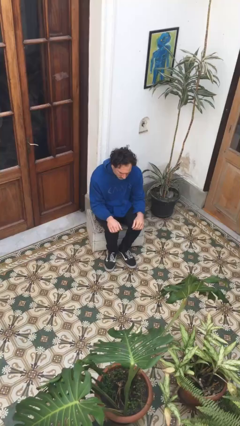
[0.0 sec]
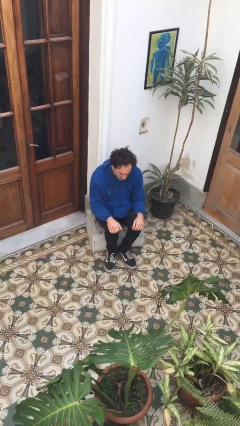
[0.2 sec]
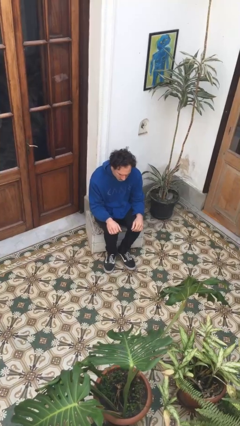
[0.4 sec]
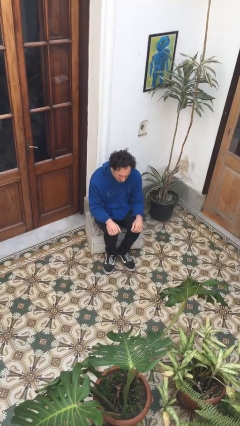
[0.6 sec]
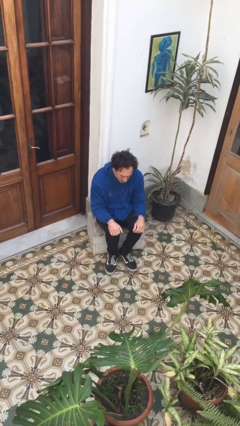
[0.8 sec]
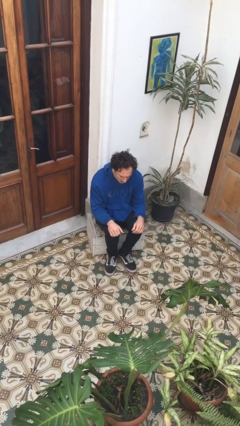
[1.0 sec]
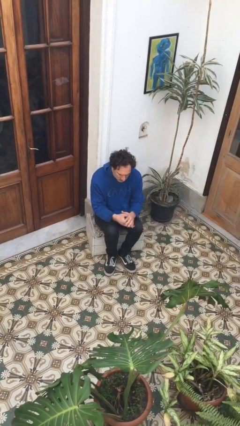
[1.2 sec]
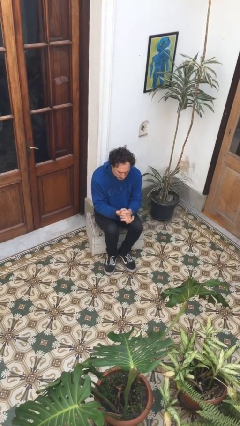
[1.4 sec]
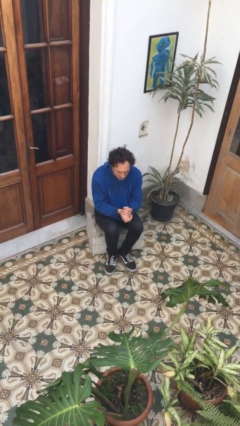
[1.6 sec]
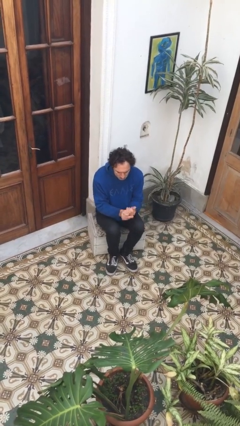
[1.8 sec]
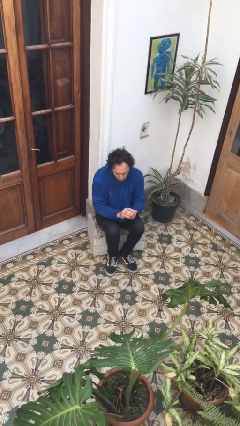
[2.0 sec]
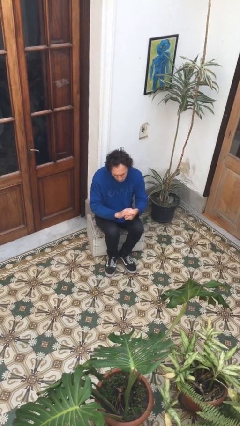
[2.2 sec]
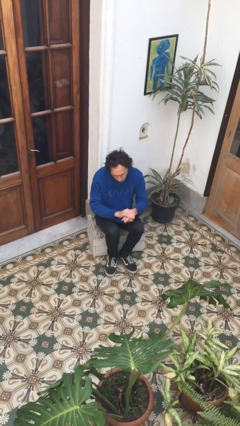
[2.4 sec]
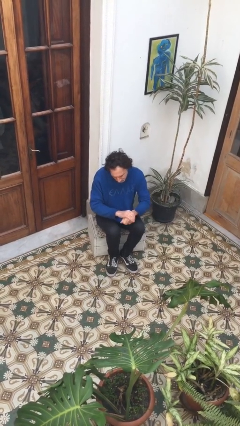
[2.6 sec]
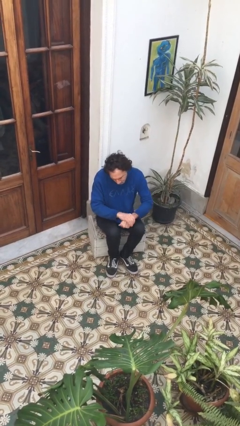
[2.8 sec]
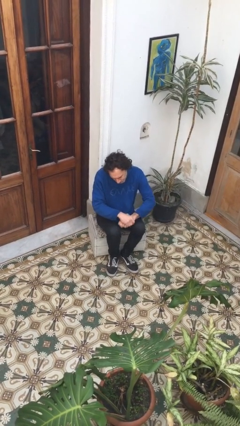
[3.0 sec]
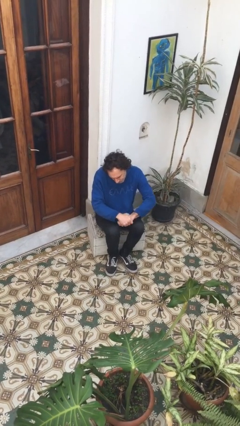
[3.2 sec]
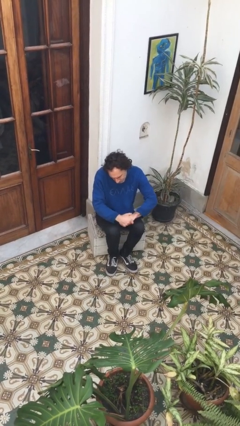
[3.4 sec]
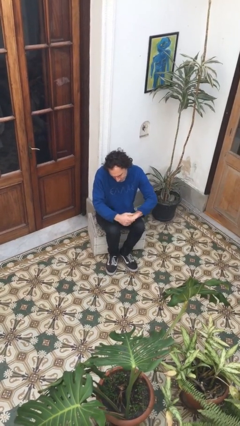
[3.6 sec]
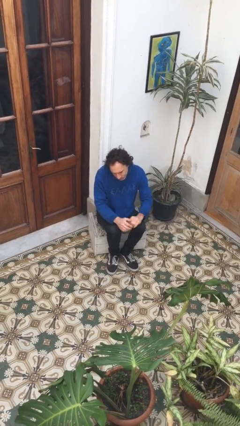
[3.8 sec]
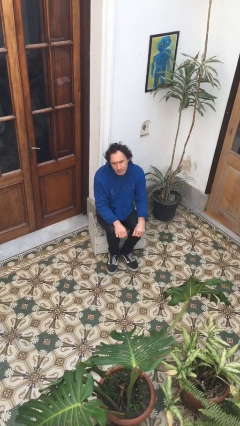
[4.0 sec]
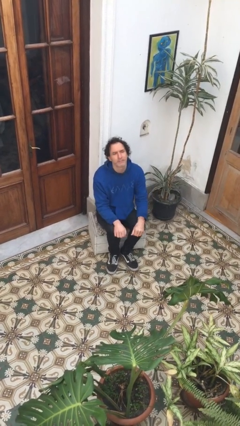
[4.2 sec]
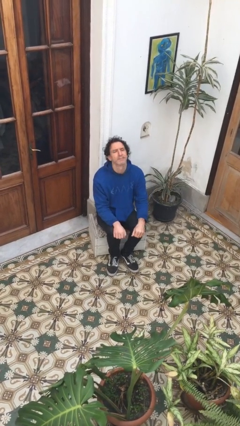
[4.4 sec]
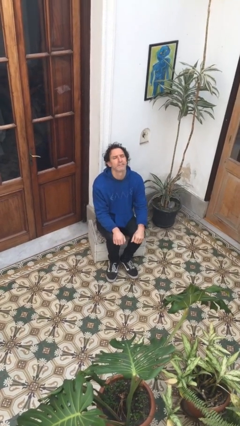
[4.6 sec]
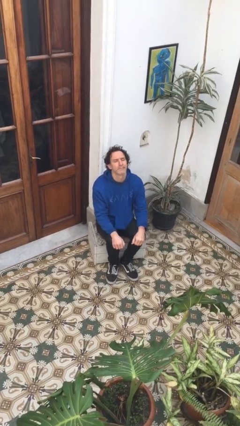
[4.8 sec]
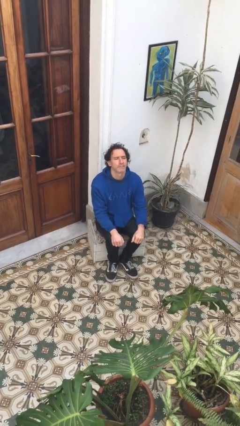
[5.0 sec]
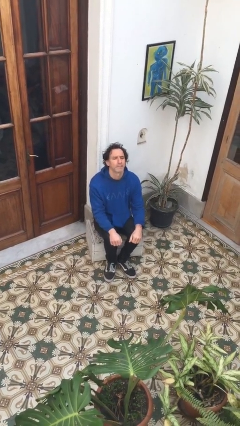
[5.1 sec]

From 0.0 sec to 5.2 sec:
person looks at hands in lap

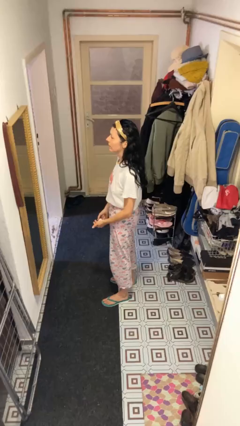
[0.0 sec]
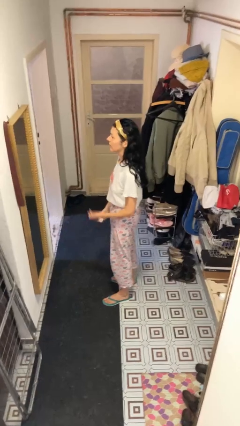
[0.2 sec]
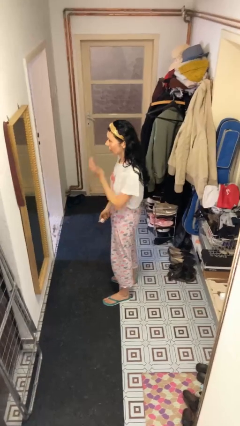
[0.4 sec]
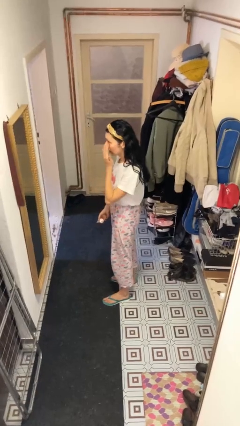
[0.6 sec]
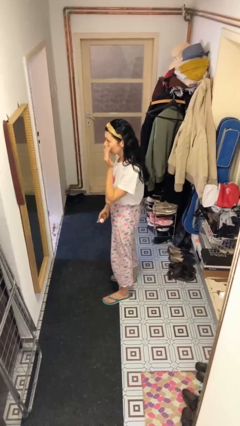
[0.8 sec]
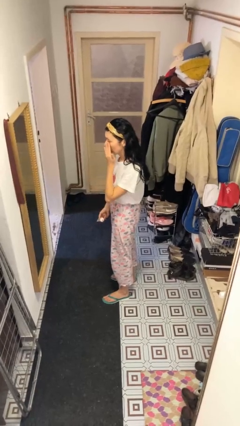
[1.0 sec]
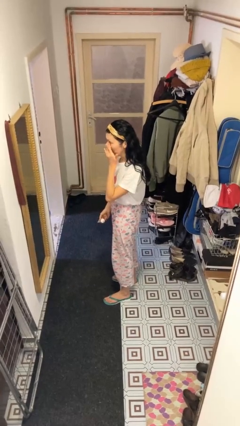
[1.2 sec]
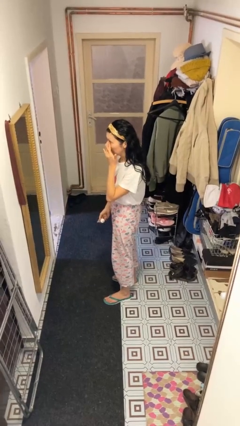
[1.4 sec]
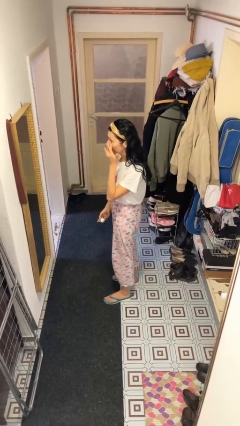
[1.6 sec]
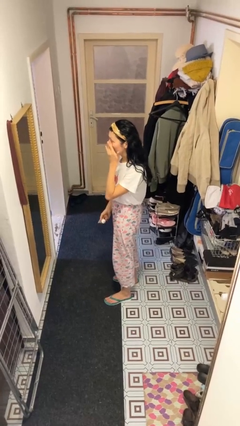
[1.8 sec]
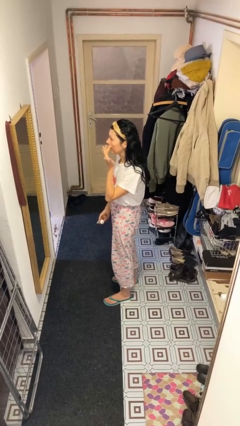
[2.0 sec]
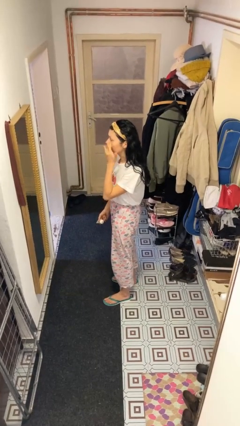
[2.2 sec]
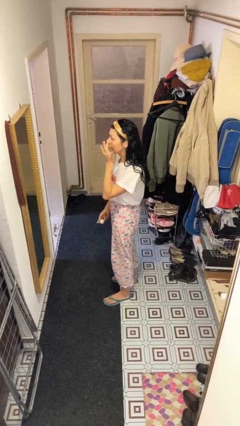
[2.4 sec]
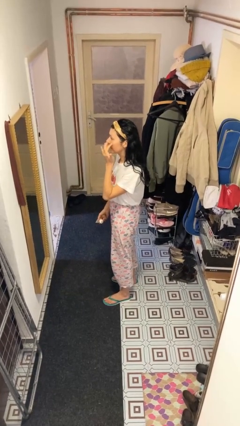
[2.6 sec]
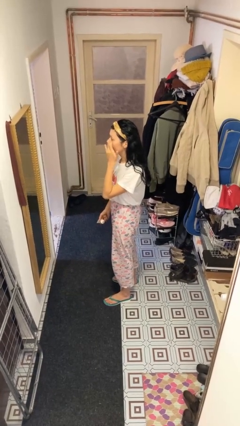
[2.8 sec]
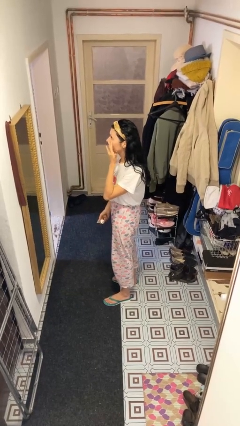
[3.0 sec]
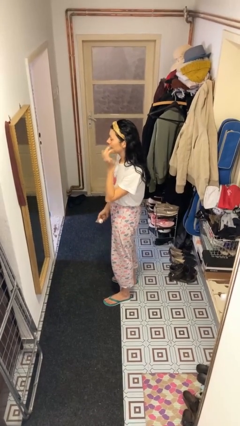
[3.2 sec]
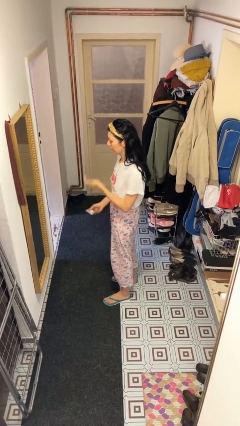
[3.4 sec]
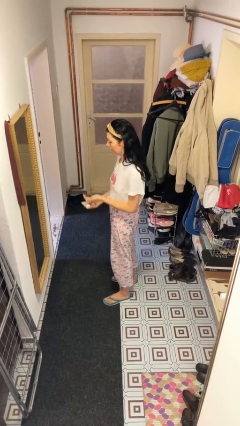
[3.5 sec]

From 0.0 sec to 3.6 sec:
person applies foundation makeup

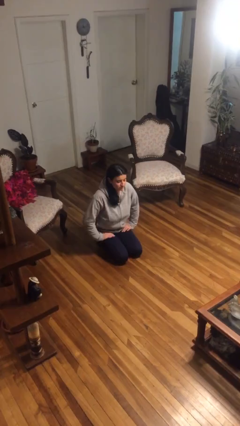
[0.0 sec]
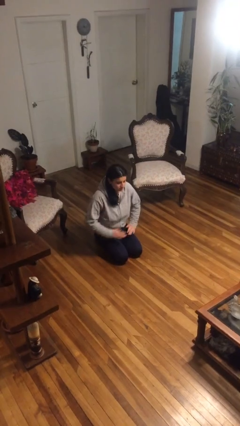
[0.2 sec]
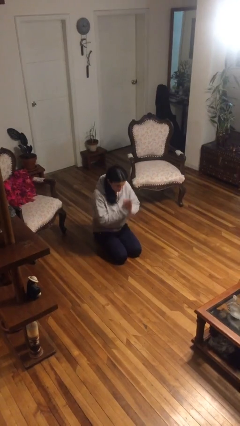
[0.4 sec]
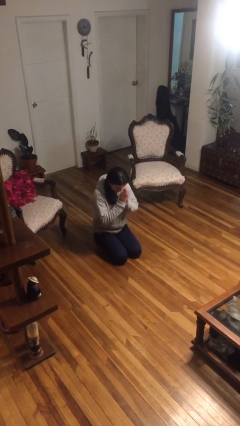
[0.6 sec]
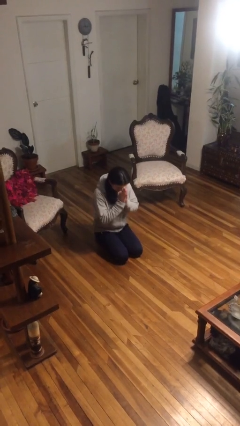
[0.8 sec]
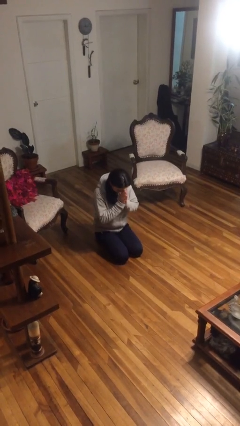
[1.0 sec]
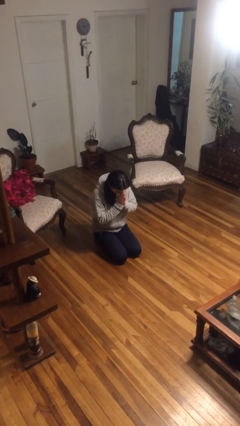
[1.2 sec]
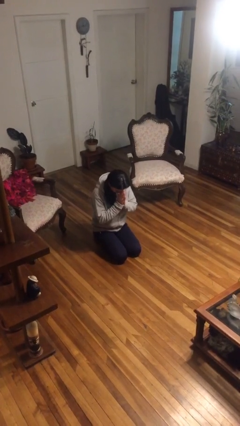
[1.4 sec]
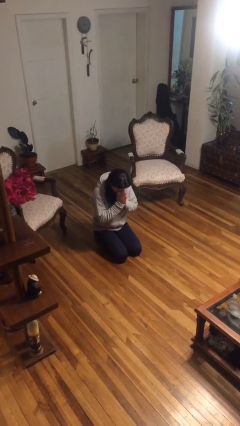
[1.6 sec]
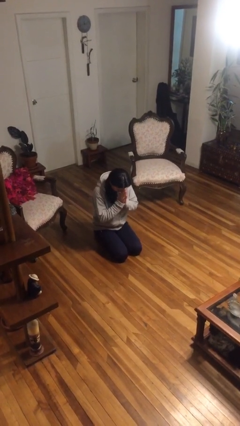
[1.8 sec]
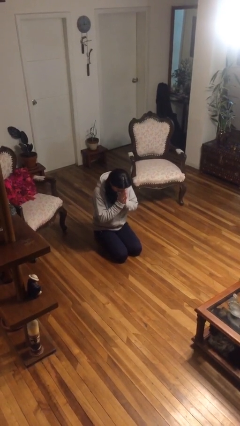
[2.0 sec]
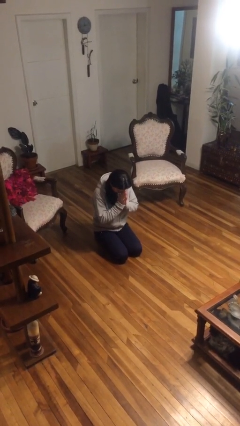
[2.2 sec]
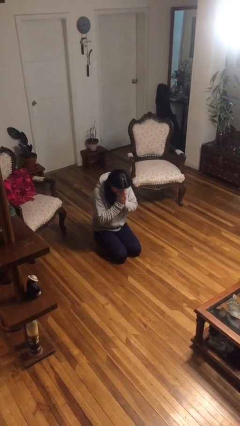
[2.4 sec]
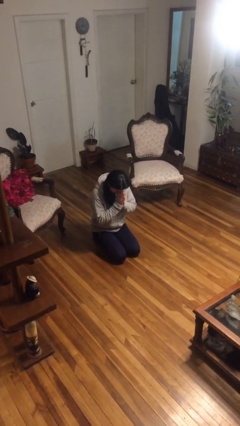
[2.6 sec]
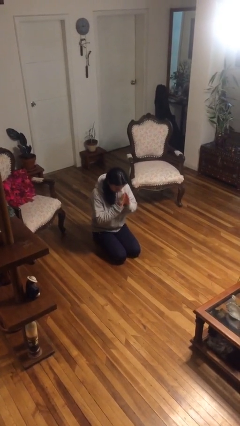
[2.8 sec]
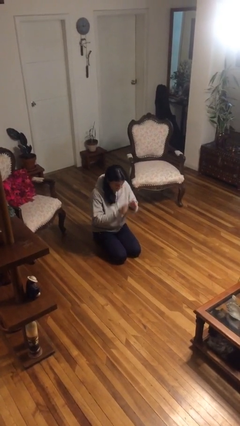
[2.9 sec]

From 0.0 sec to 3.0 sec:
person prays

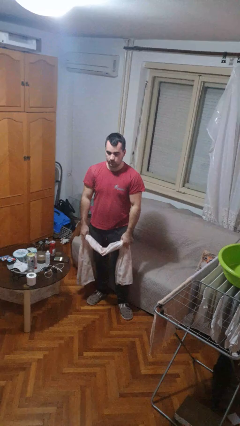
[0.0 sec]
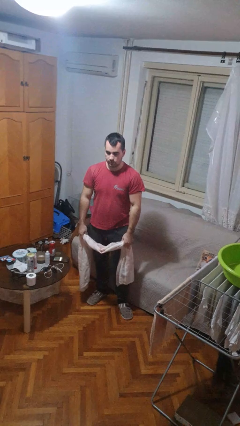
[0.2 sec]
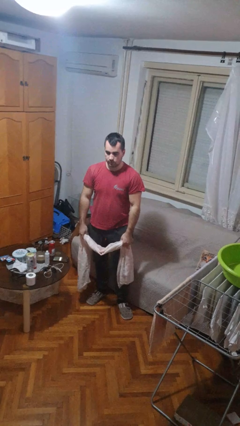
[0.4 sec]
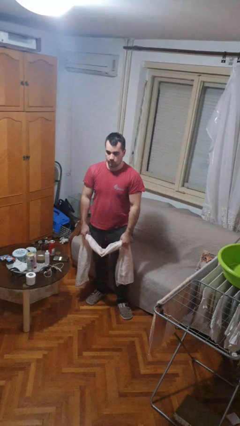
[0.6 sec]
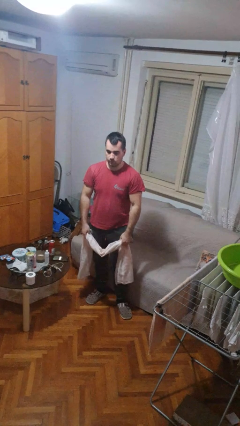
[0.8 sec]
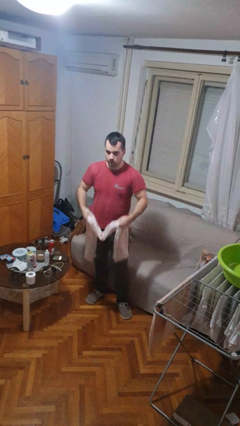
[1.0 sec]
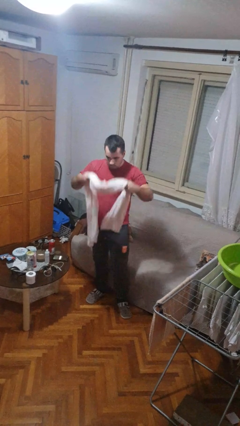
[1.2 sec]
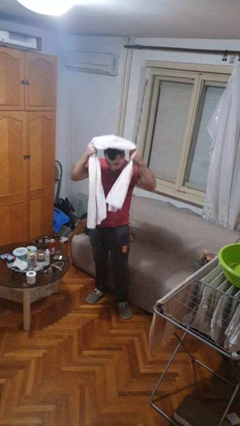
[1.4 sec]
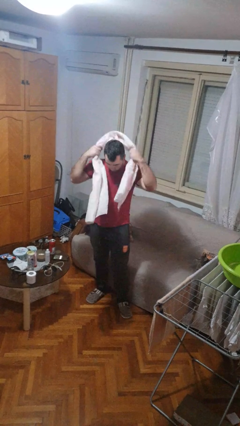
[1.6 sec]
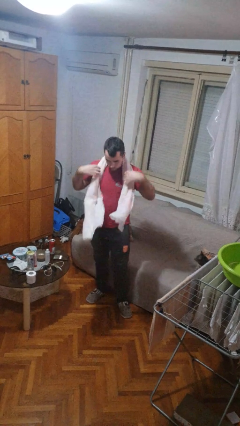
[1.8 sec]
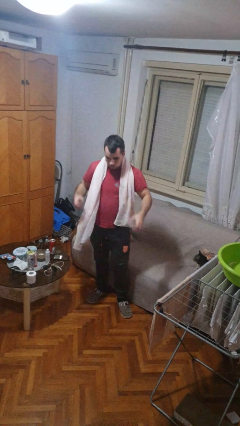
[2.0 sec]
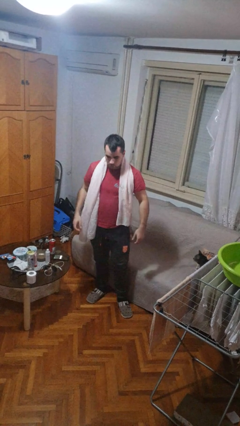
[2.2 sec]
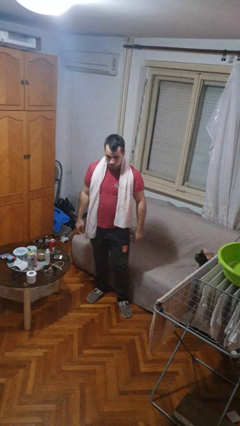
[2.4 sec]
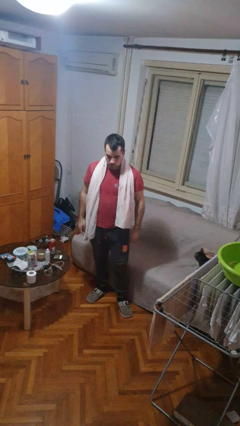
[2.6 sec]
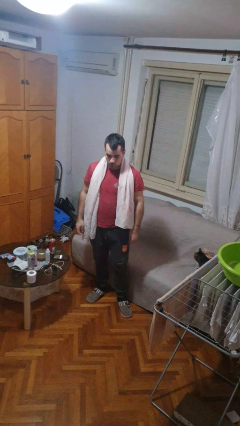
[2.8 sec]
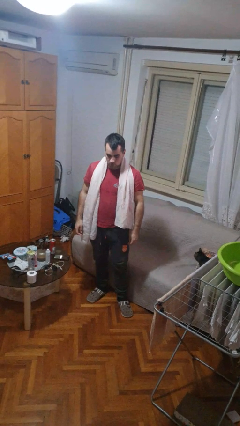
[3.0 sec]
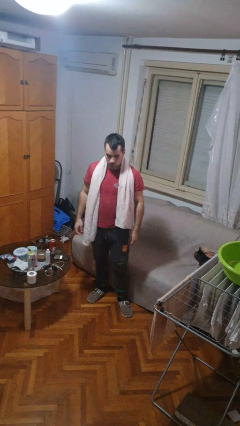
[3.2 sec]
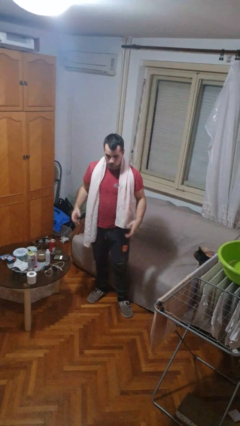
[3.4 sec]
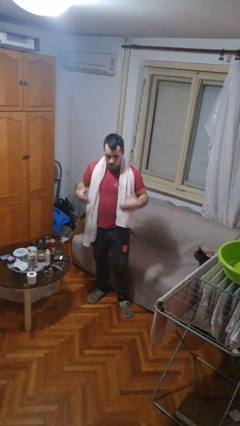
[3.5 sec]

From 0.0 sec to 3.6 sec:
person puts on scarf

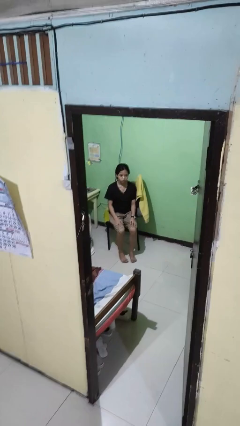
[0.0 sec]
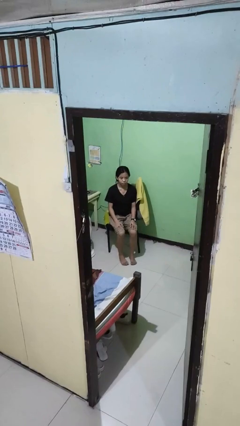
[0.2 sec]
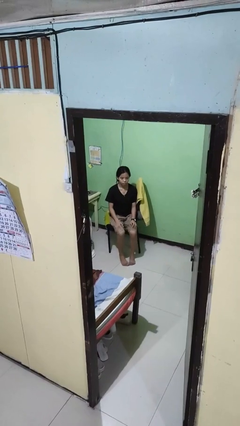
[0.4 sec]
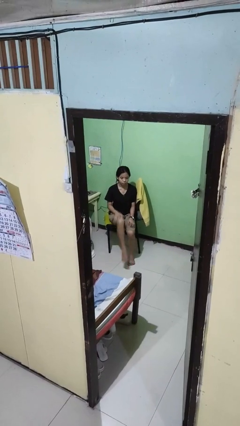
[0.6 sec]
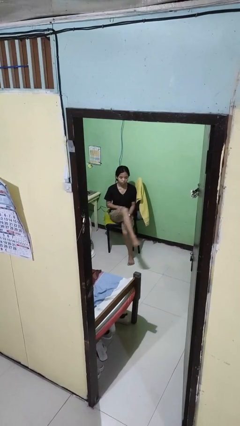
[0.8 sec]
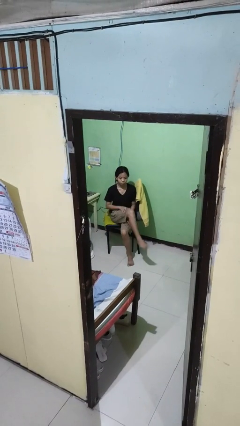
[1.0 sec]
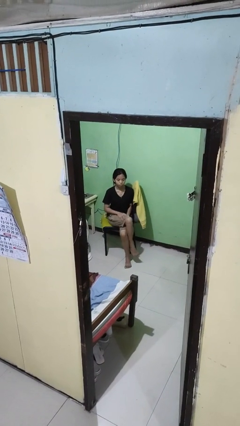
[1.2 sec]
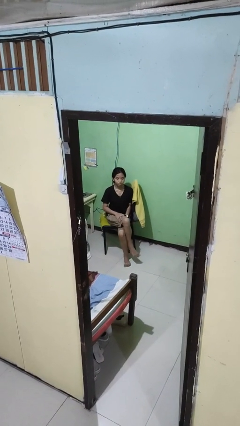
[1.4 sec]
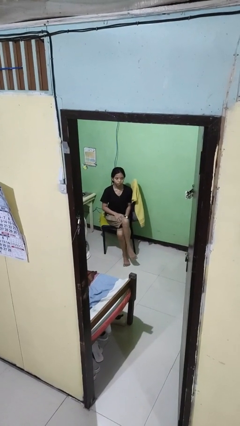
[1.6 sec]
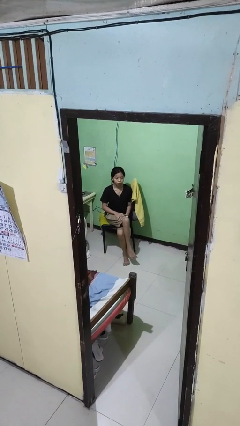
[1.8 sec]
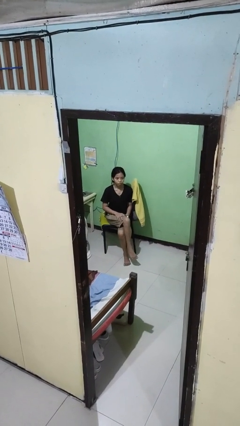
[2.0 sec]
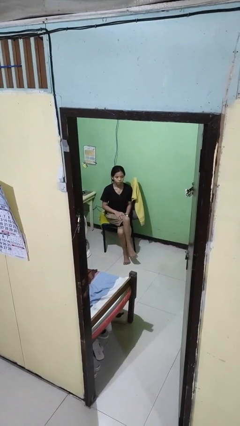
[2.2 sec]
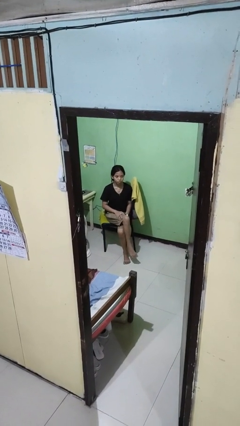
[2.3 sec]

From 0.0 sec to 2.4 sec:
person crosses legs
